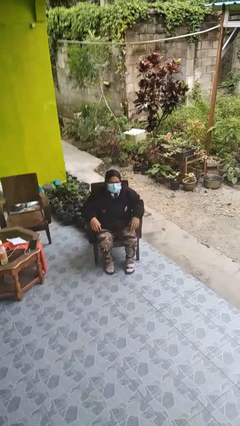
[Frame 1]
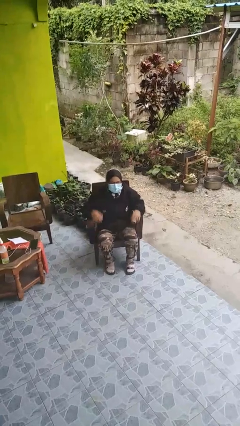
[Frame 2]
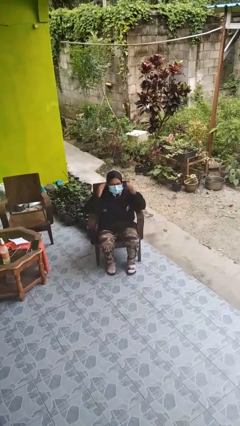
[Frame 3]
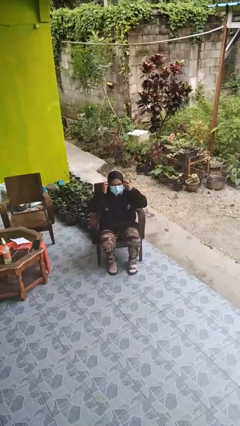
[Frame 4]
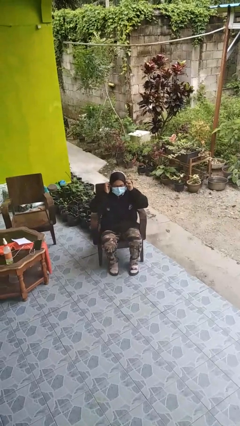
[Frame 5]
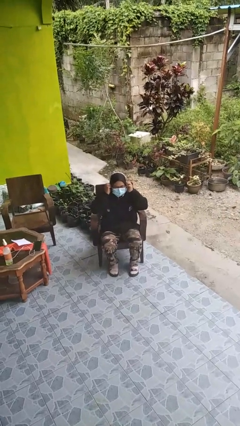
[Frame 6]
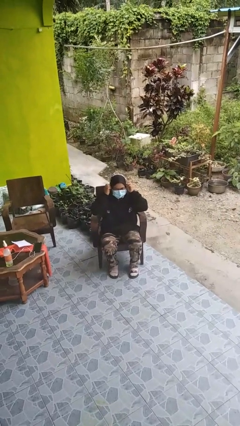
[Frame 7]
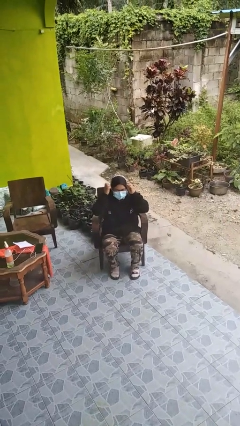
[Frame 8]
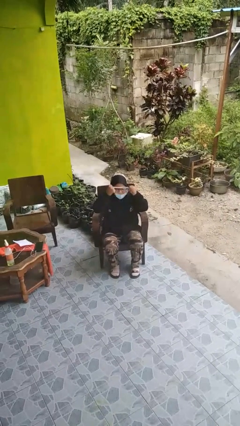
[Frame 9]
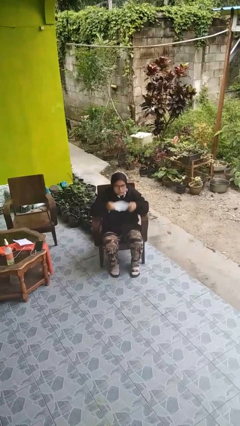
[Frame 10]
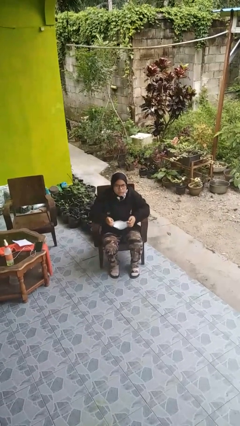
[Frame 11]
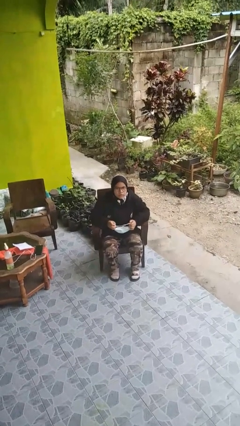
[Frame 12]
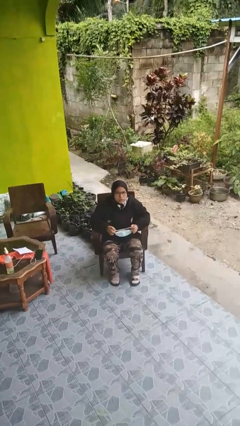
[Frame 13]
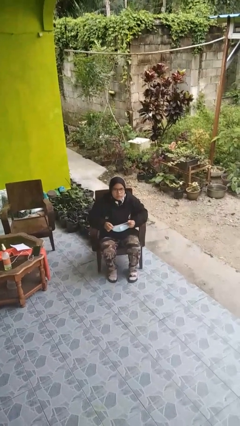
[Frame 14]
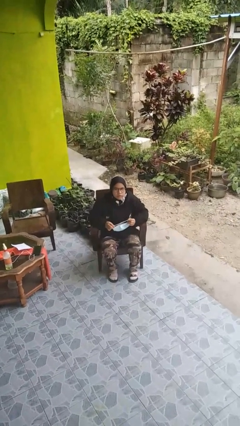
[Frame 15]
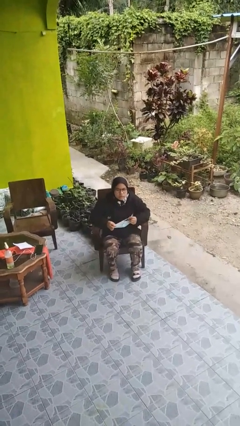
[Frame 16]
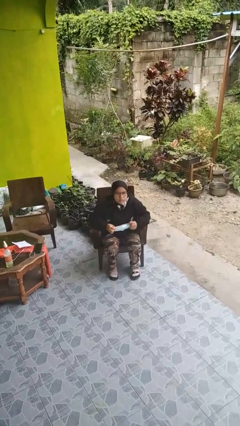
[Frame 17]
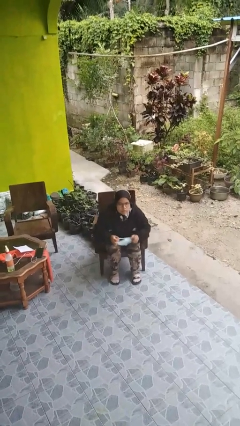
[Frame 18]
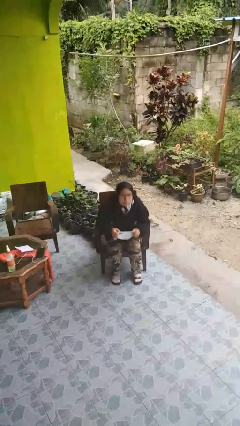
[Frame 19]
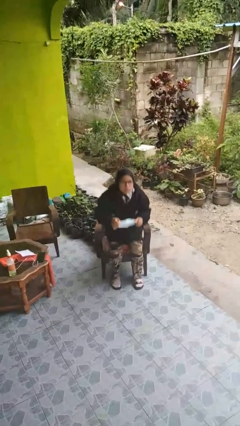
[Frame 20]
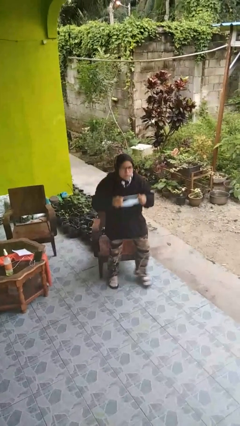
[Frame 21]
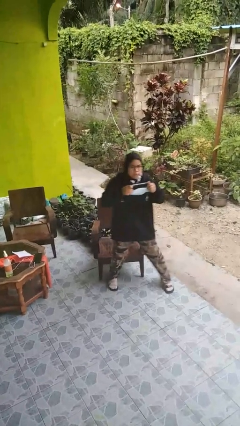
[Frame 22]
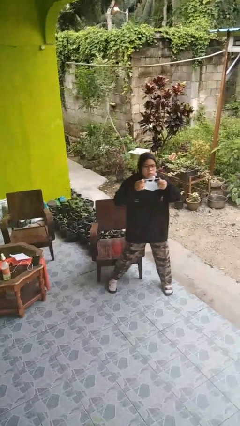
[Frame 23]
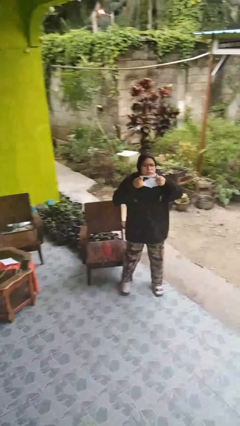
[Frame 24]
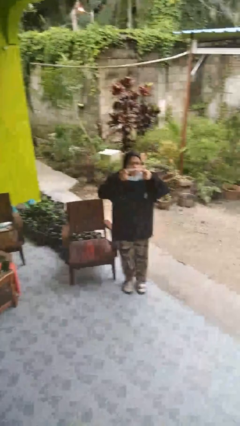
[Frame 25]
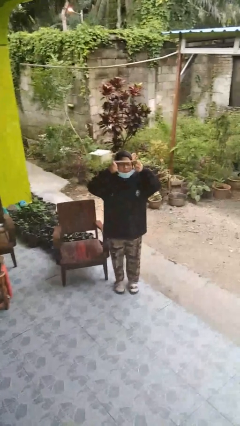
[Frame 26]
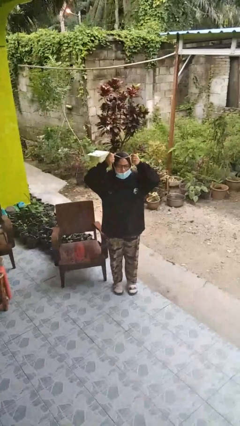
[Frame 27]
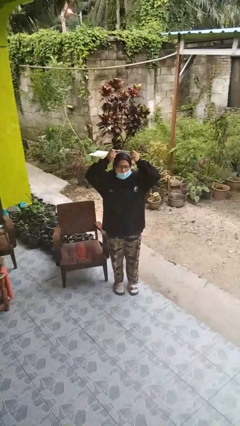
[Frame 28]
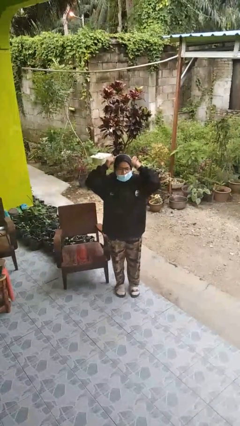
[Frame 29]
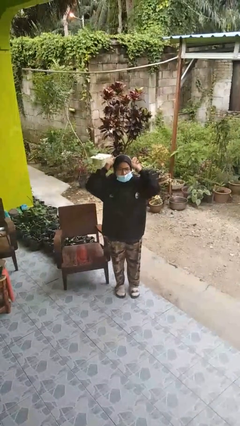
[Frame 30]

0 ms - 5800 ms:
person takes off facemask

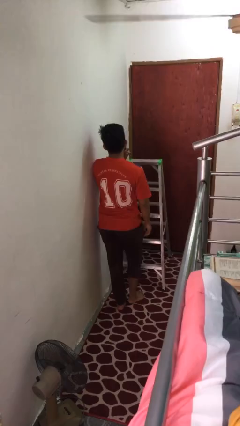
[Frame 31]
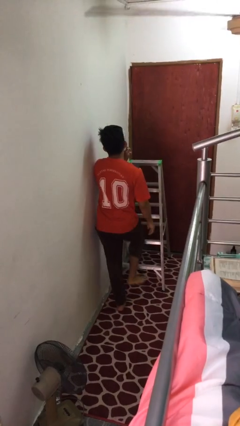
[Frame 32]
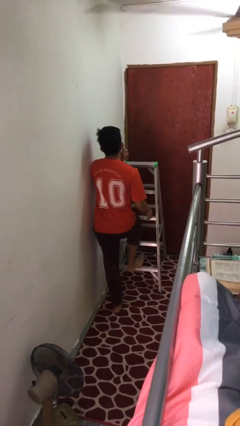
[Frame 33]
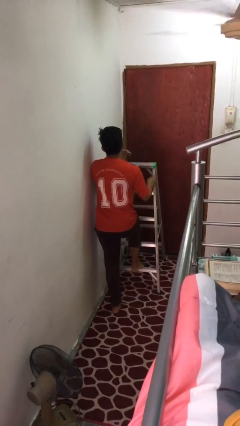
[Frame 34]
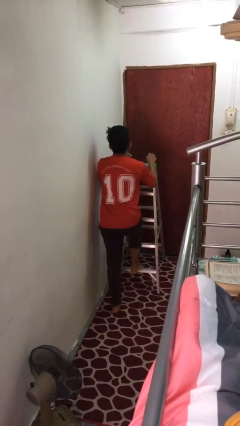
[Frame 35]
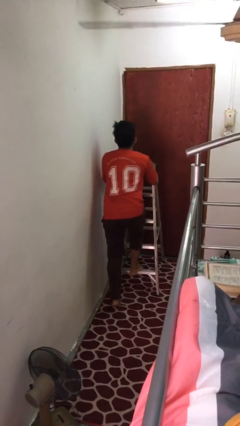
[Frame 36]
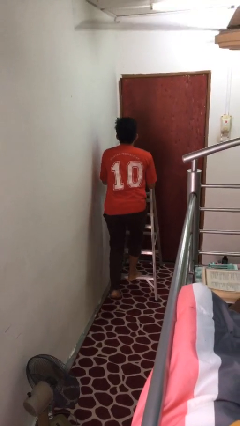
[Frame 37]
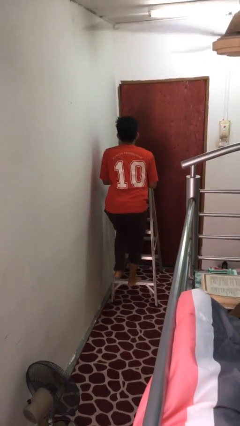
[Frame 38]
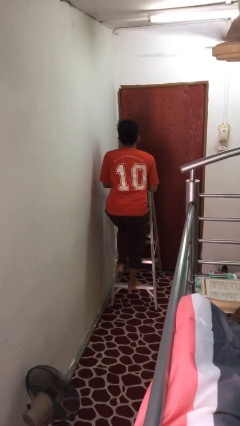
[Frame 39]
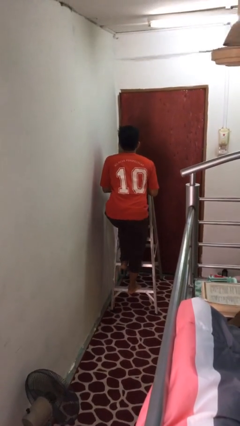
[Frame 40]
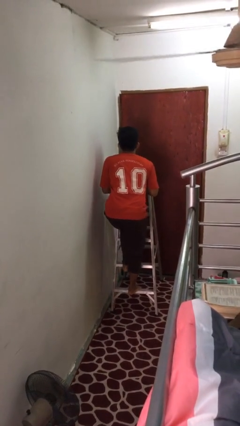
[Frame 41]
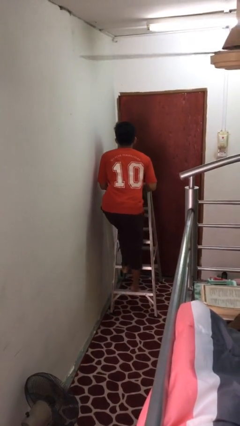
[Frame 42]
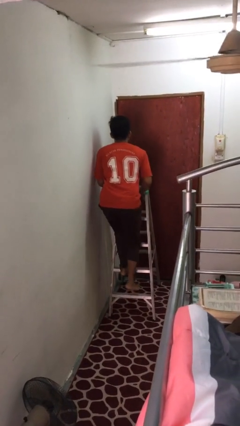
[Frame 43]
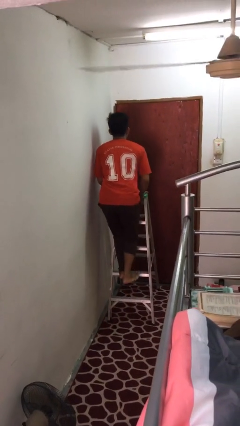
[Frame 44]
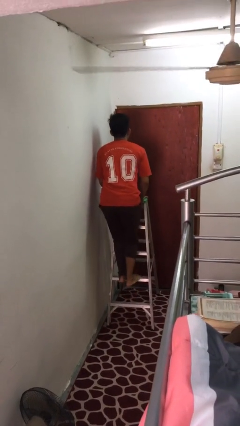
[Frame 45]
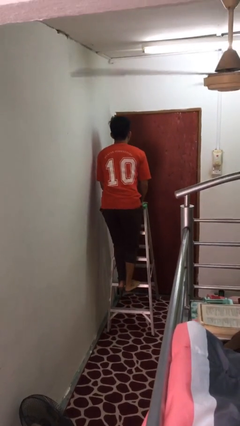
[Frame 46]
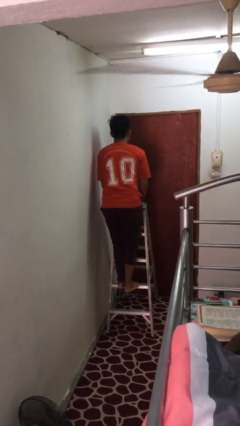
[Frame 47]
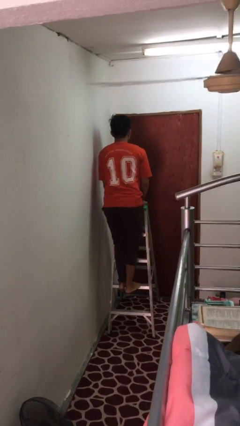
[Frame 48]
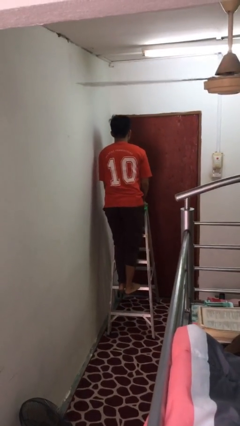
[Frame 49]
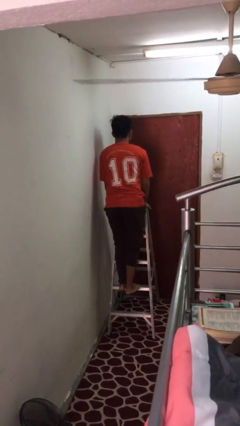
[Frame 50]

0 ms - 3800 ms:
person climbs up ladder

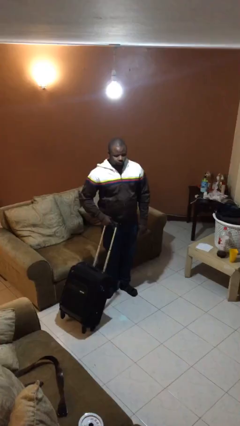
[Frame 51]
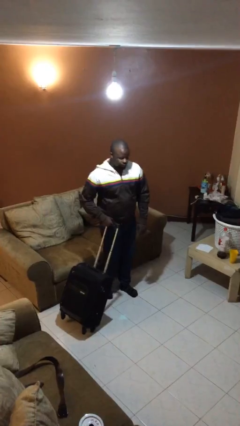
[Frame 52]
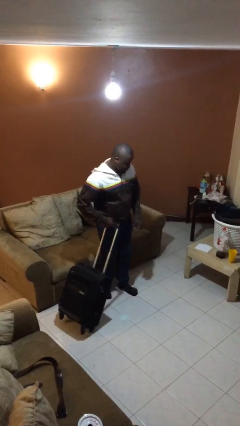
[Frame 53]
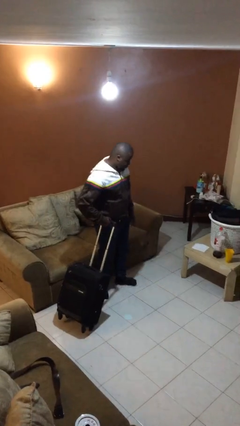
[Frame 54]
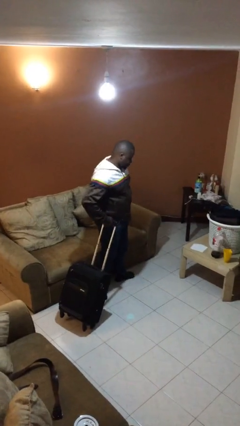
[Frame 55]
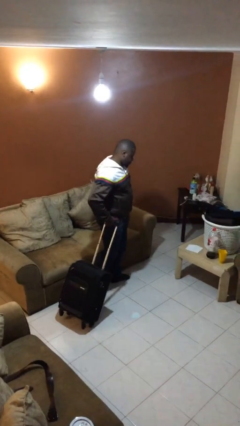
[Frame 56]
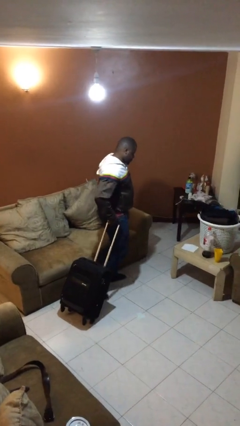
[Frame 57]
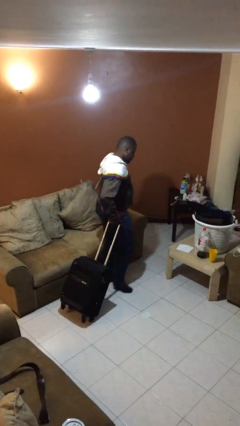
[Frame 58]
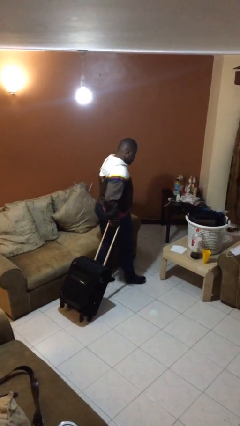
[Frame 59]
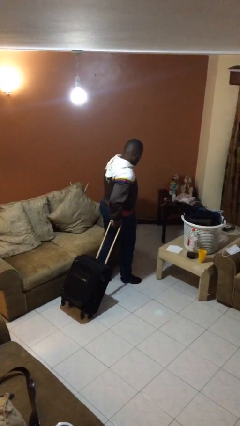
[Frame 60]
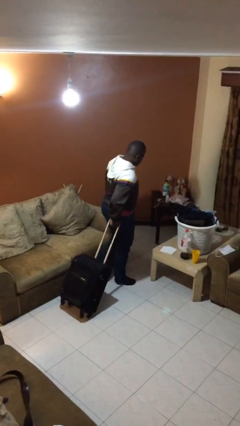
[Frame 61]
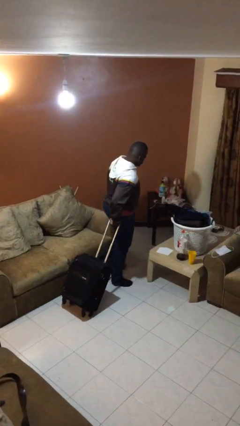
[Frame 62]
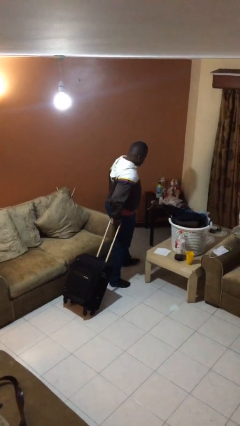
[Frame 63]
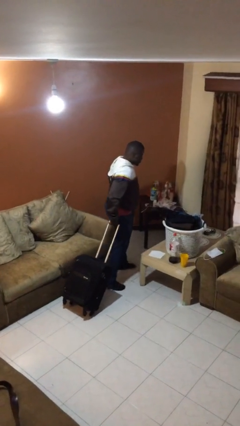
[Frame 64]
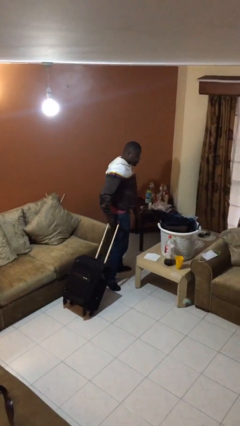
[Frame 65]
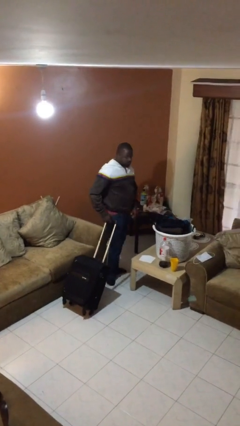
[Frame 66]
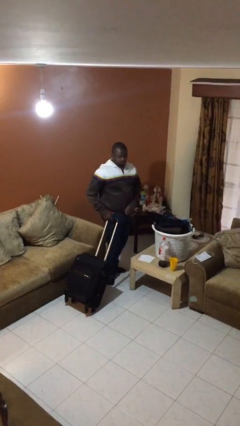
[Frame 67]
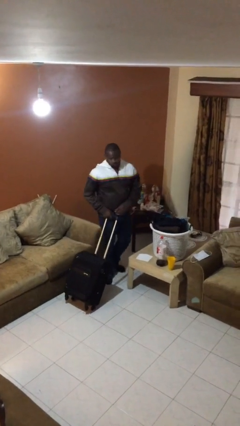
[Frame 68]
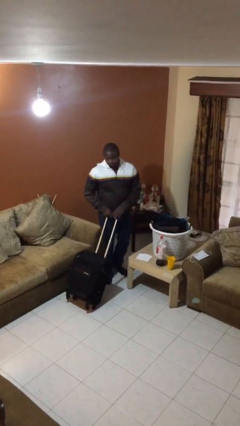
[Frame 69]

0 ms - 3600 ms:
person pulls wheeled cart

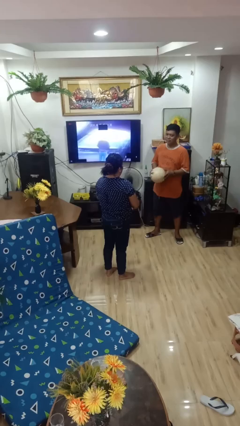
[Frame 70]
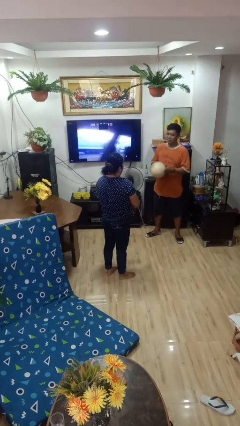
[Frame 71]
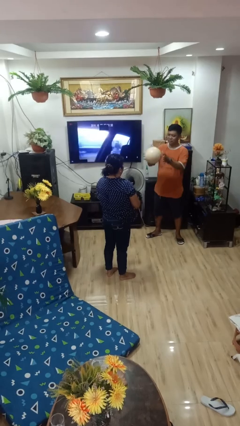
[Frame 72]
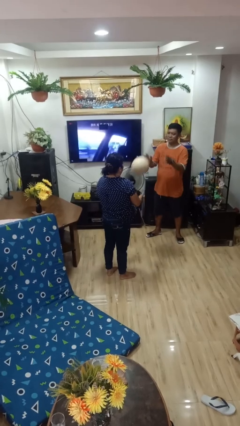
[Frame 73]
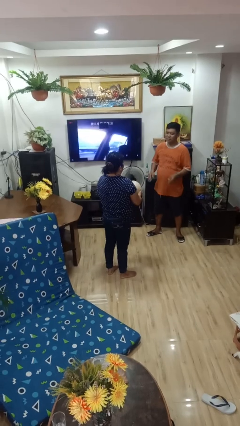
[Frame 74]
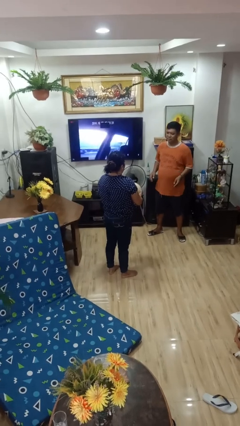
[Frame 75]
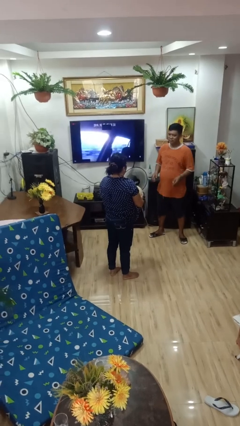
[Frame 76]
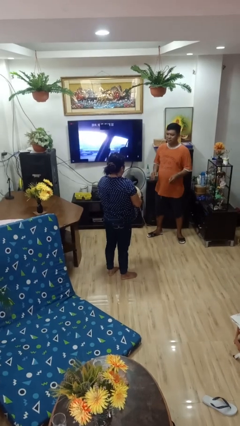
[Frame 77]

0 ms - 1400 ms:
person catches object from person

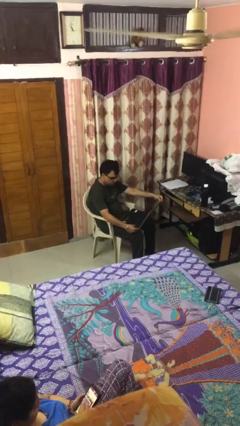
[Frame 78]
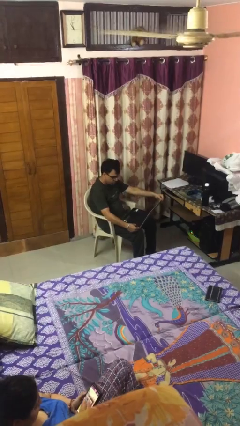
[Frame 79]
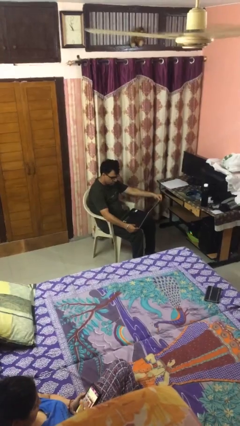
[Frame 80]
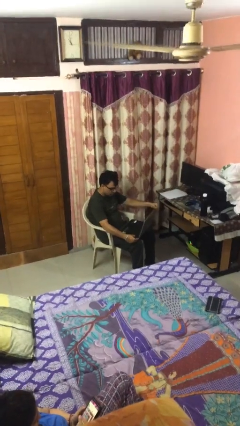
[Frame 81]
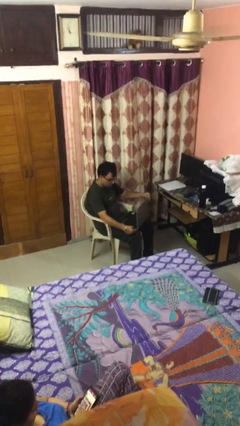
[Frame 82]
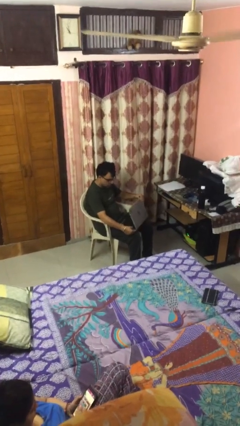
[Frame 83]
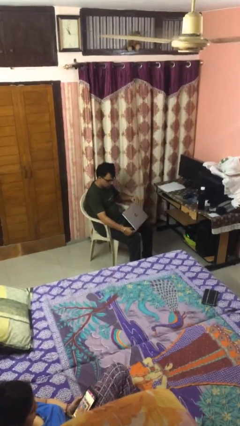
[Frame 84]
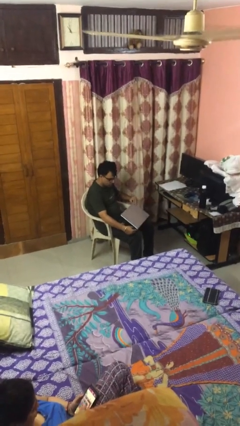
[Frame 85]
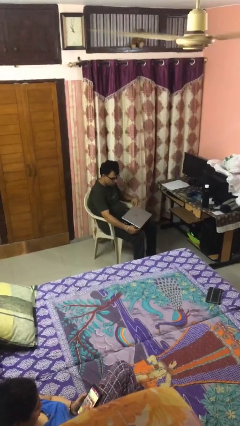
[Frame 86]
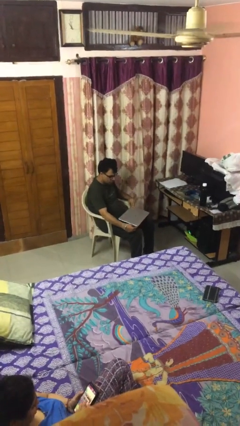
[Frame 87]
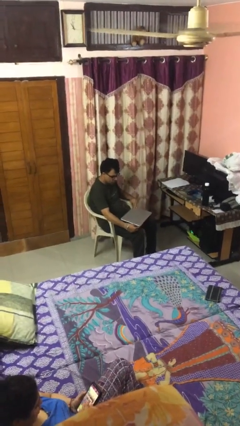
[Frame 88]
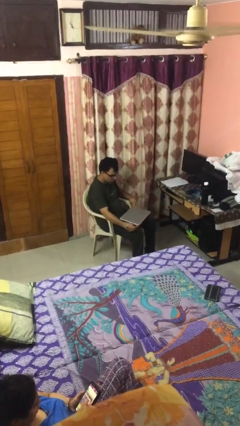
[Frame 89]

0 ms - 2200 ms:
person closes laptop

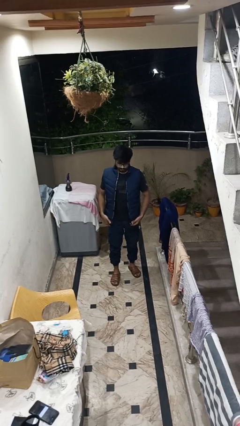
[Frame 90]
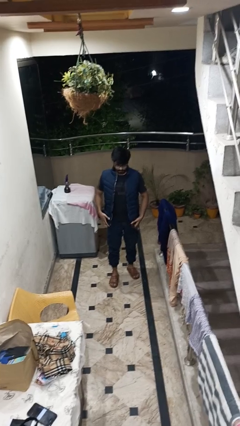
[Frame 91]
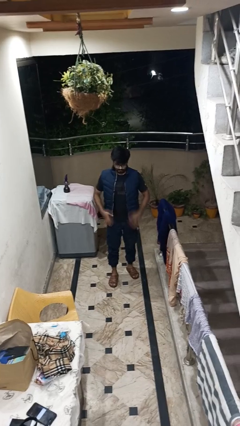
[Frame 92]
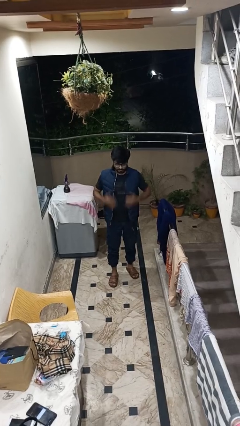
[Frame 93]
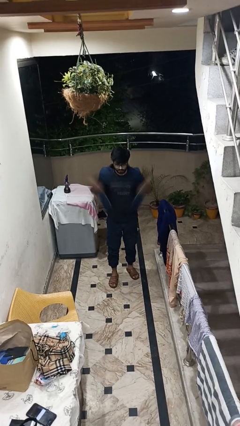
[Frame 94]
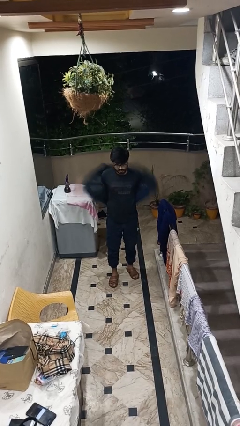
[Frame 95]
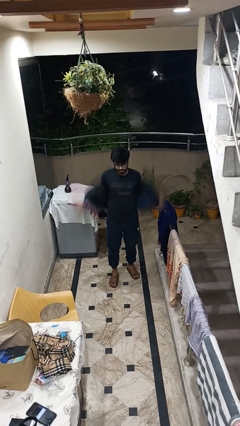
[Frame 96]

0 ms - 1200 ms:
person takes off jacket
